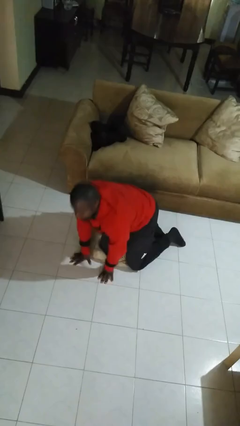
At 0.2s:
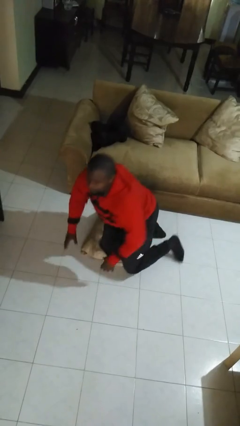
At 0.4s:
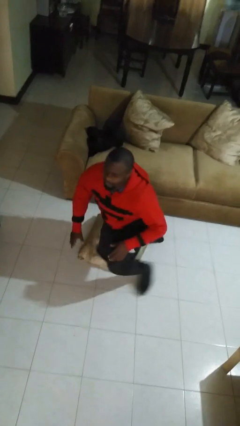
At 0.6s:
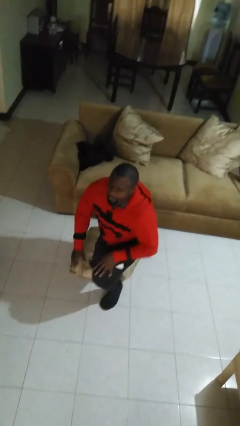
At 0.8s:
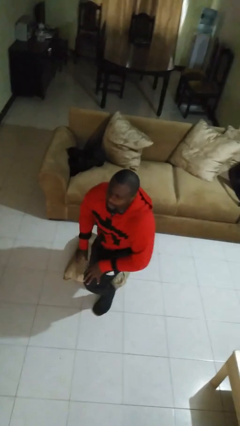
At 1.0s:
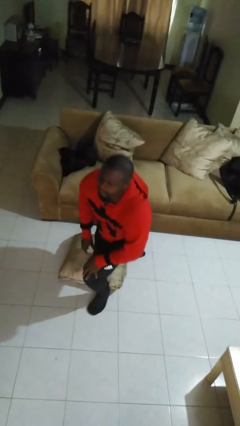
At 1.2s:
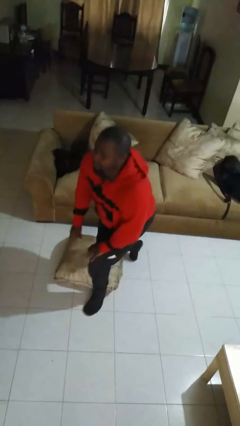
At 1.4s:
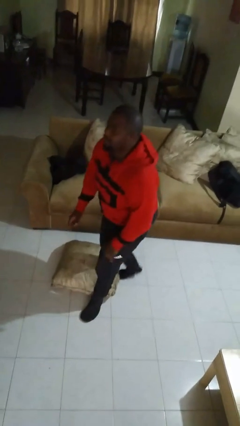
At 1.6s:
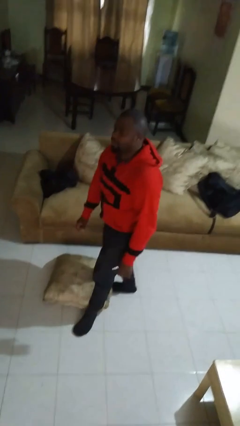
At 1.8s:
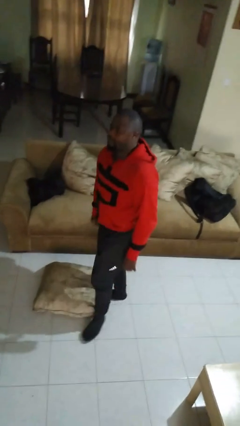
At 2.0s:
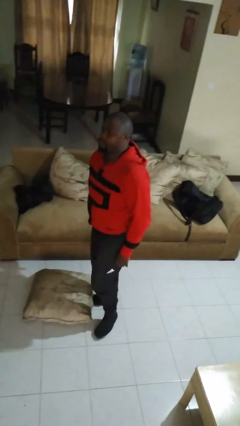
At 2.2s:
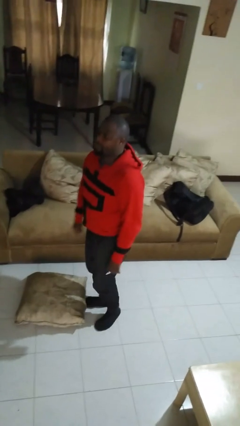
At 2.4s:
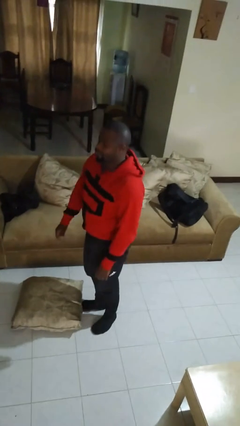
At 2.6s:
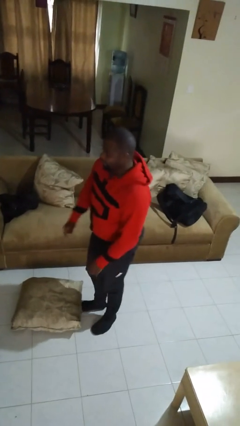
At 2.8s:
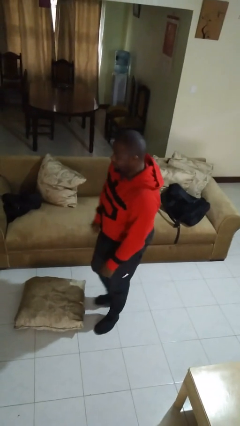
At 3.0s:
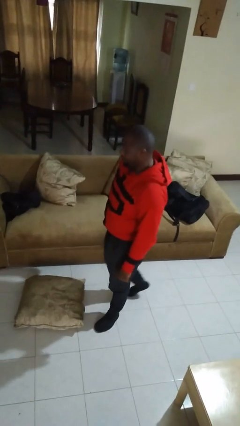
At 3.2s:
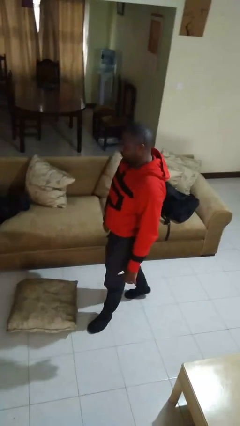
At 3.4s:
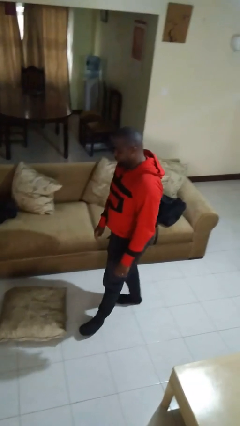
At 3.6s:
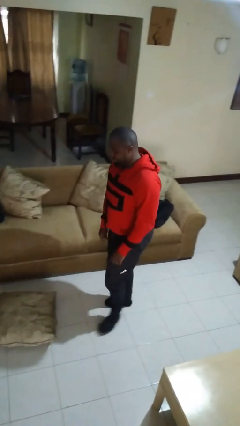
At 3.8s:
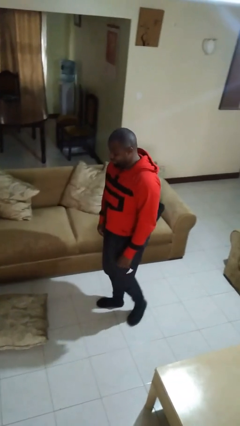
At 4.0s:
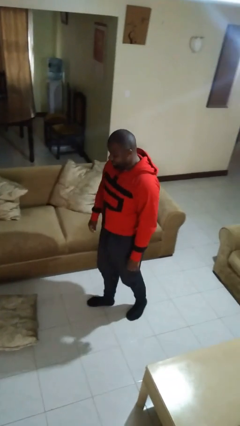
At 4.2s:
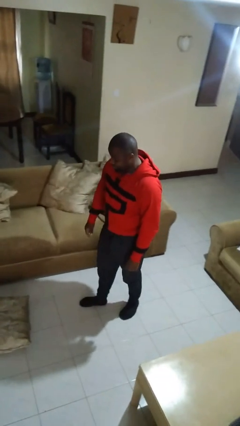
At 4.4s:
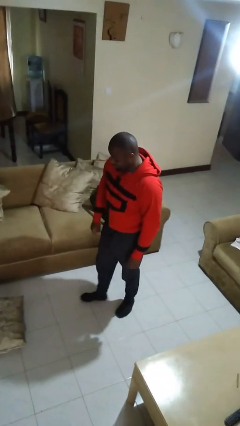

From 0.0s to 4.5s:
person stands up from floor

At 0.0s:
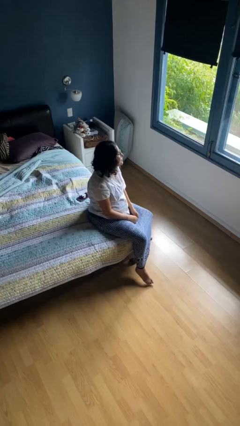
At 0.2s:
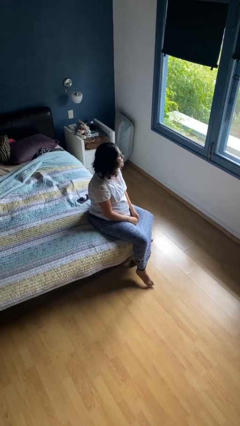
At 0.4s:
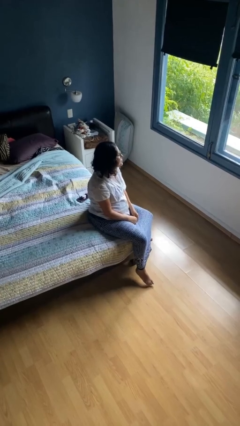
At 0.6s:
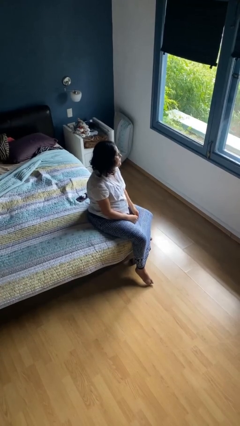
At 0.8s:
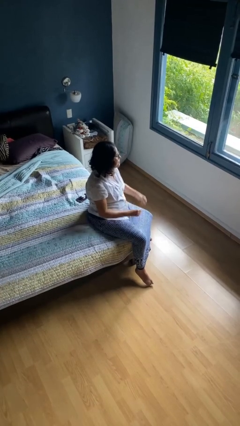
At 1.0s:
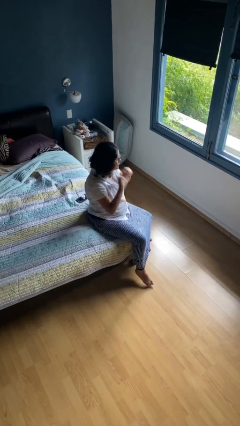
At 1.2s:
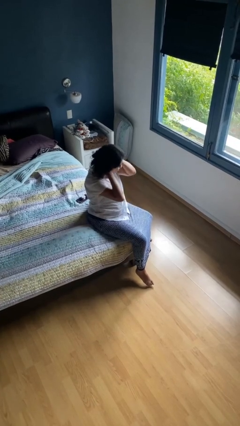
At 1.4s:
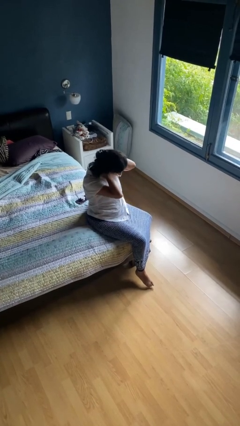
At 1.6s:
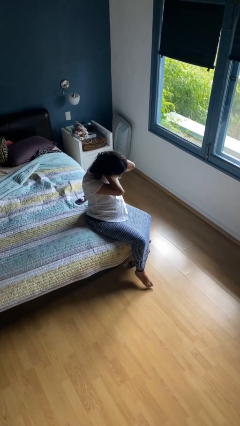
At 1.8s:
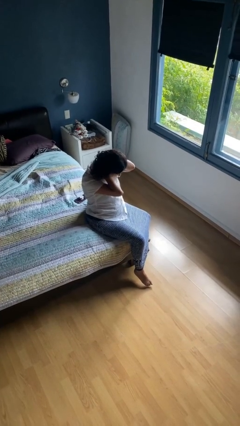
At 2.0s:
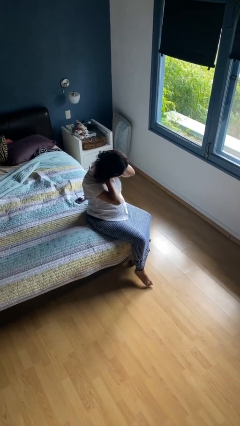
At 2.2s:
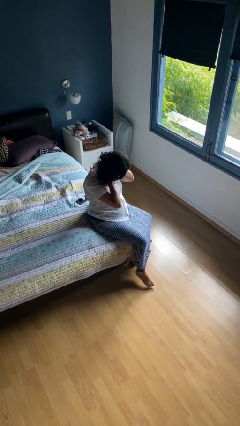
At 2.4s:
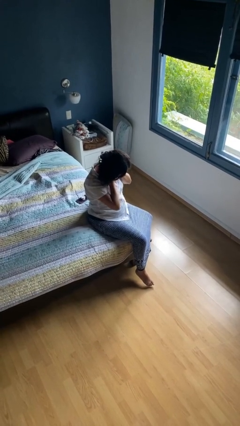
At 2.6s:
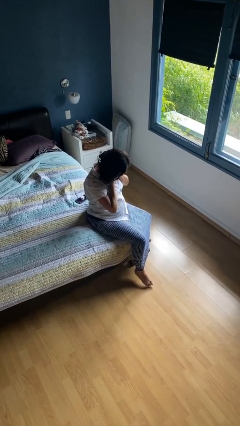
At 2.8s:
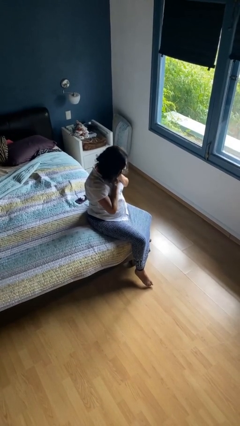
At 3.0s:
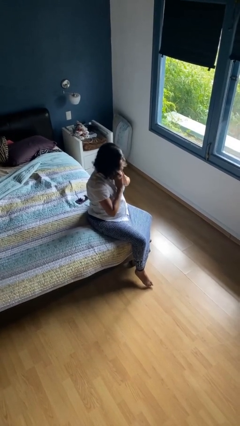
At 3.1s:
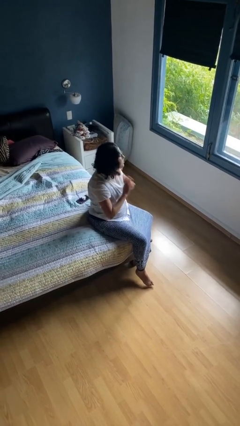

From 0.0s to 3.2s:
person rubs neck

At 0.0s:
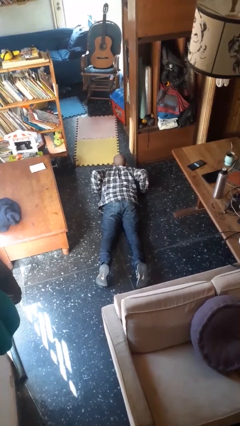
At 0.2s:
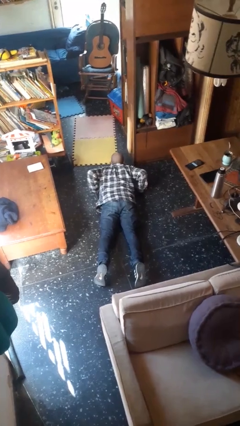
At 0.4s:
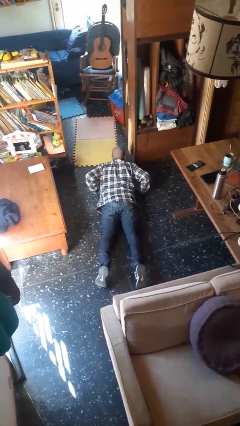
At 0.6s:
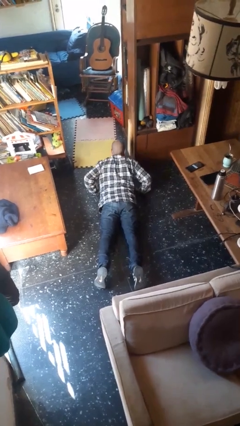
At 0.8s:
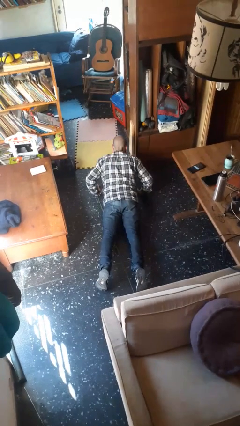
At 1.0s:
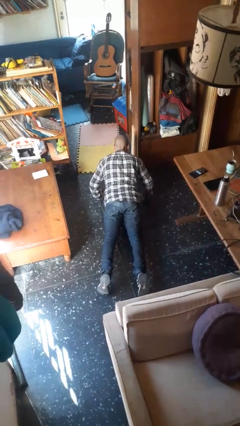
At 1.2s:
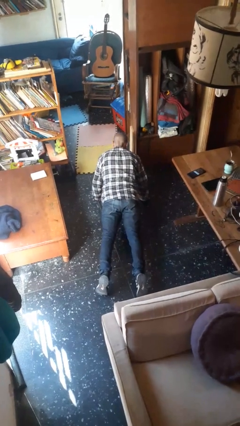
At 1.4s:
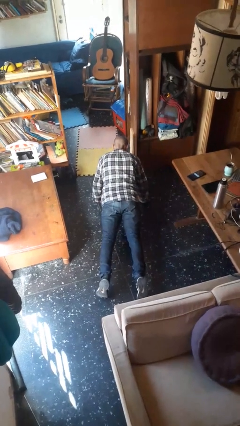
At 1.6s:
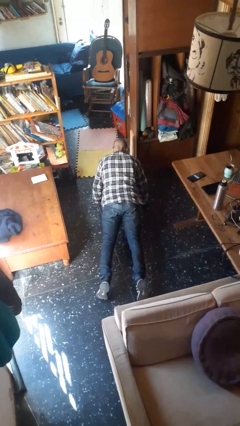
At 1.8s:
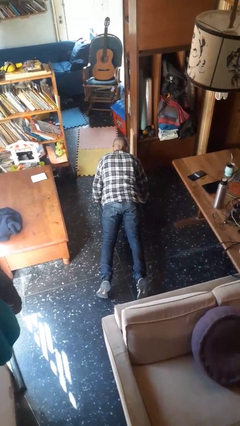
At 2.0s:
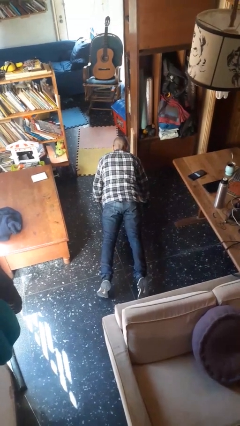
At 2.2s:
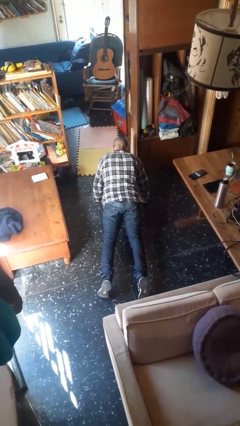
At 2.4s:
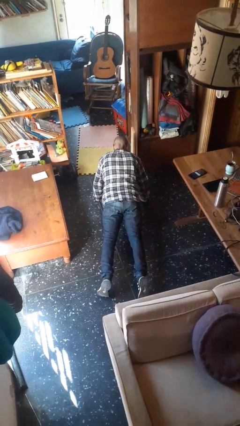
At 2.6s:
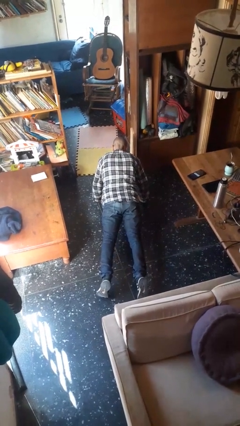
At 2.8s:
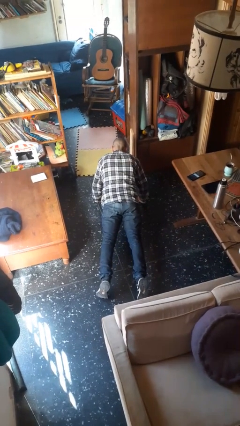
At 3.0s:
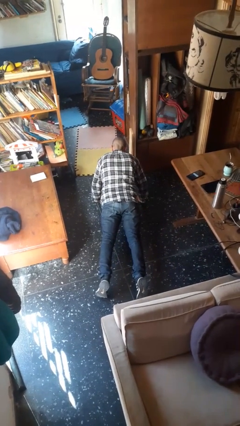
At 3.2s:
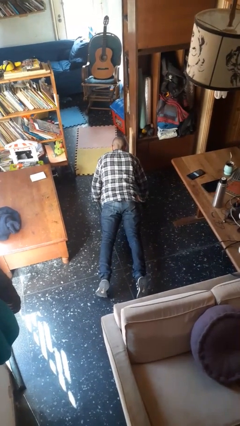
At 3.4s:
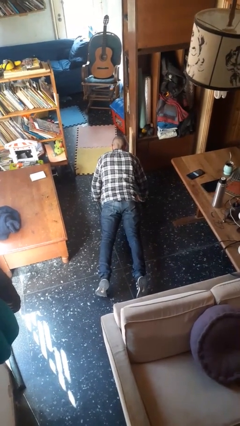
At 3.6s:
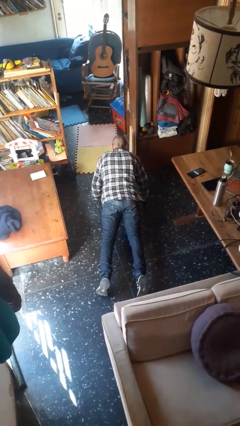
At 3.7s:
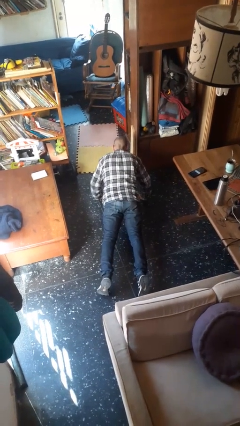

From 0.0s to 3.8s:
person exercises with pushup

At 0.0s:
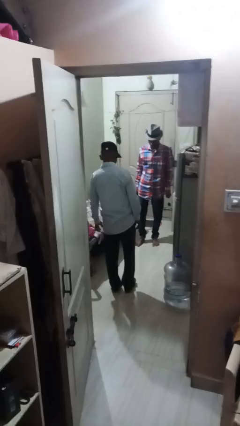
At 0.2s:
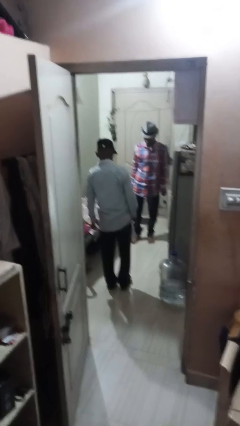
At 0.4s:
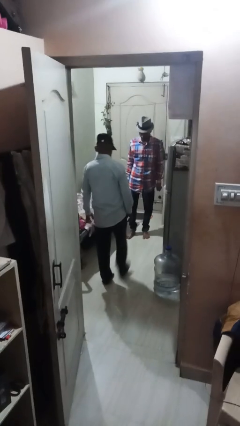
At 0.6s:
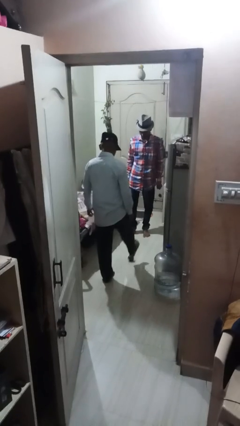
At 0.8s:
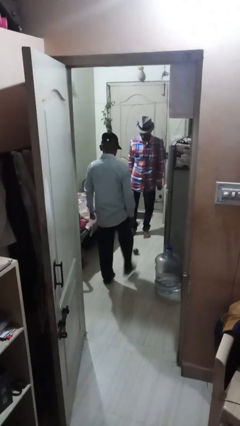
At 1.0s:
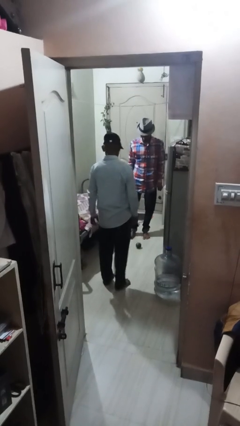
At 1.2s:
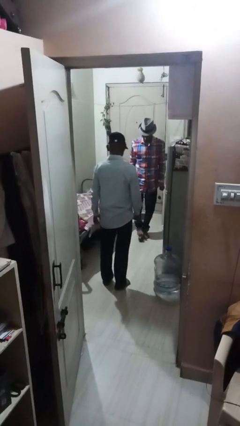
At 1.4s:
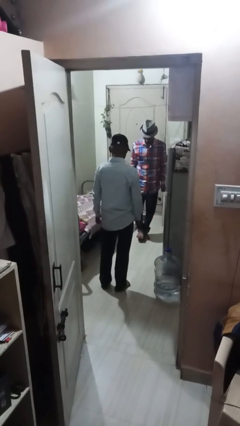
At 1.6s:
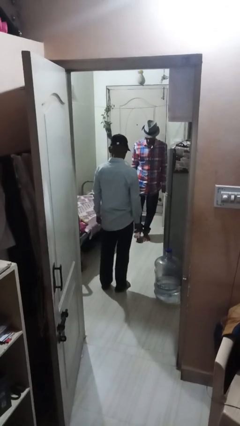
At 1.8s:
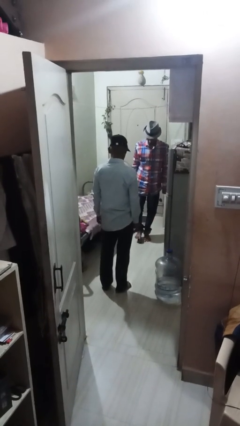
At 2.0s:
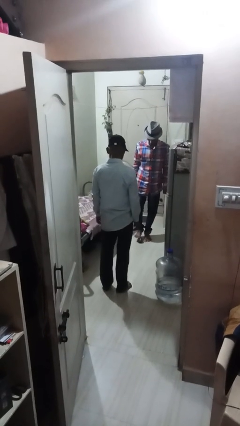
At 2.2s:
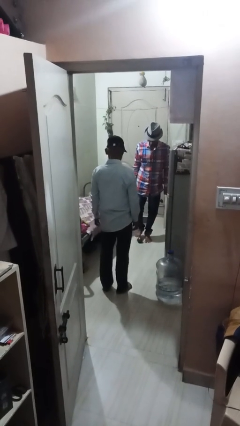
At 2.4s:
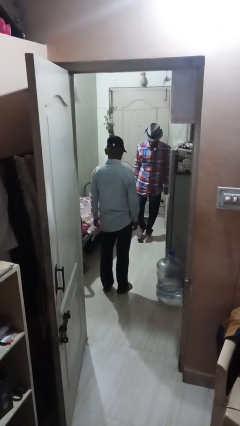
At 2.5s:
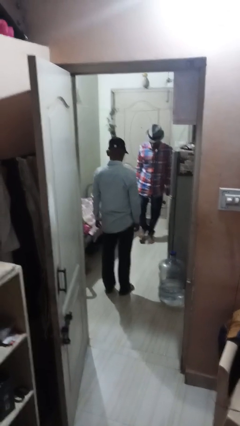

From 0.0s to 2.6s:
person kicks object to person

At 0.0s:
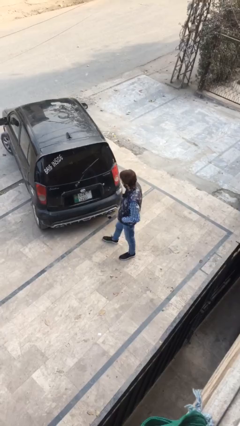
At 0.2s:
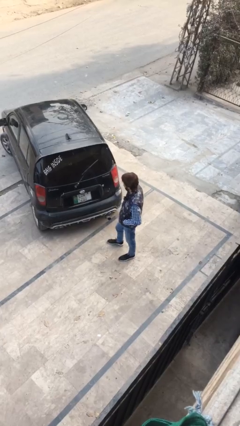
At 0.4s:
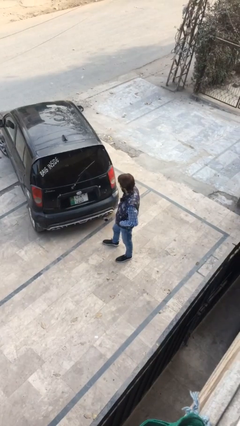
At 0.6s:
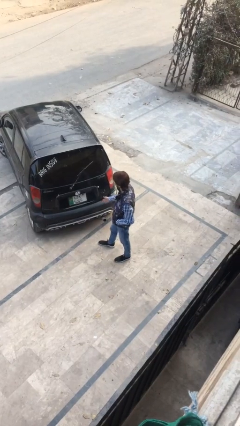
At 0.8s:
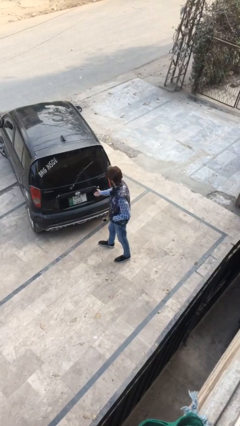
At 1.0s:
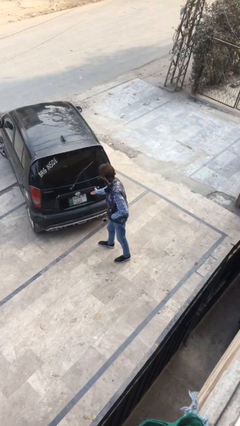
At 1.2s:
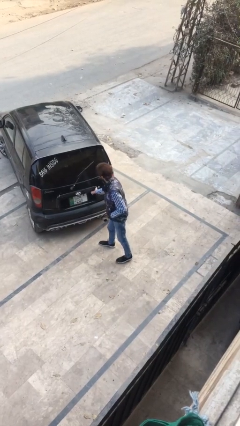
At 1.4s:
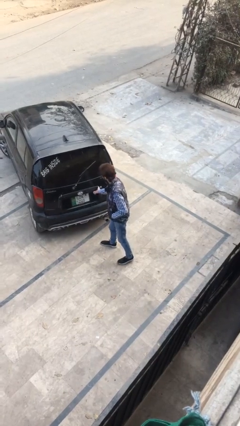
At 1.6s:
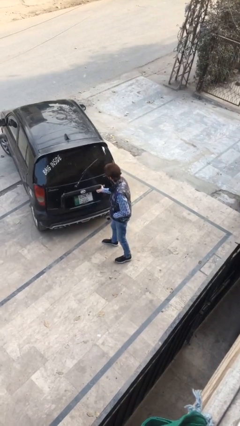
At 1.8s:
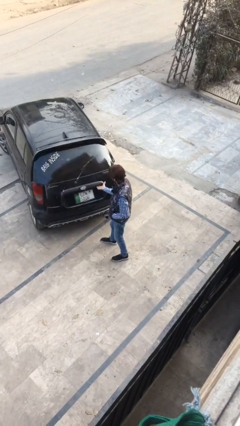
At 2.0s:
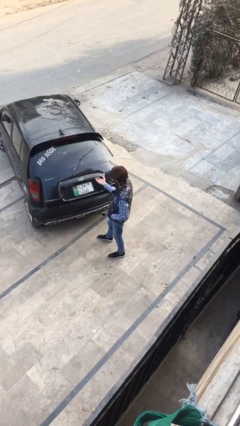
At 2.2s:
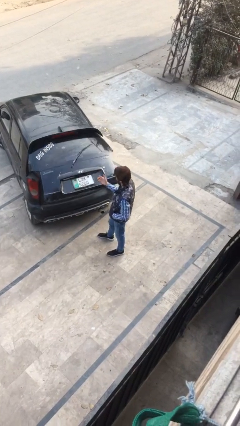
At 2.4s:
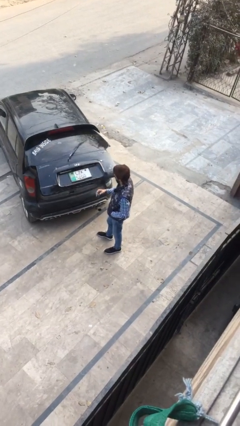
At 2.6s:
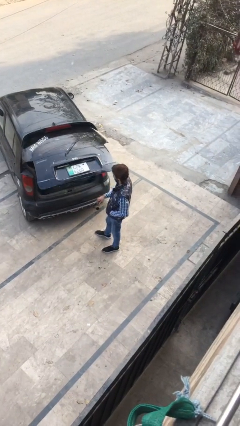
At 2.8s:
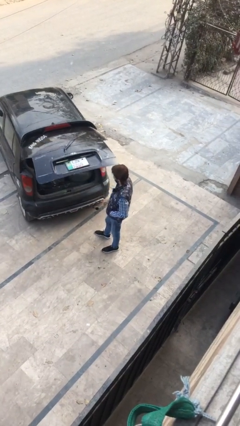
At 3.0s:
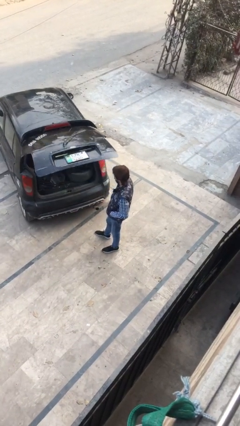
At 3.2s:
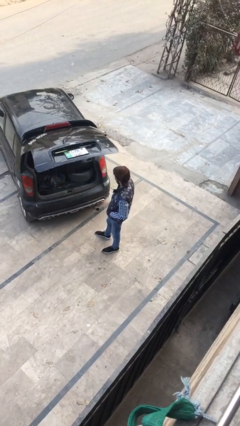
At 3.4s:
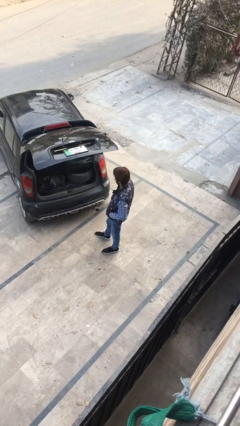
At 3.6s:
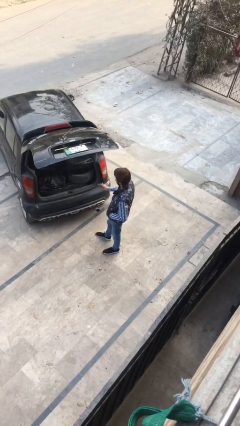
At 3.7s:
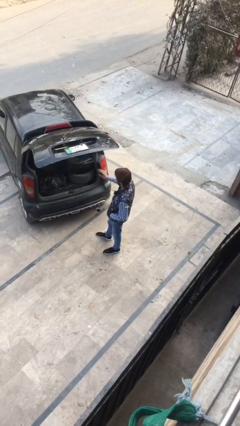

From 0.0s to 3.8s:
person opens car trunk
